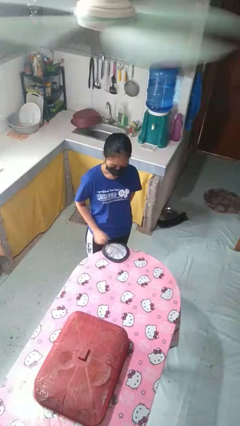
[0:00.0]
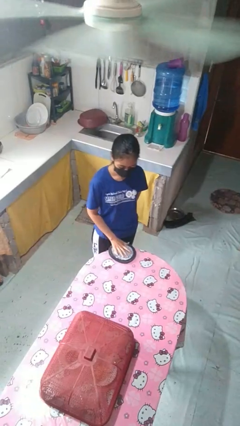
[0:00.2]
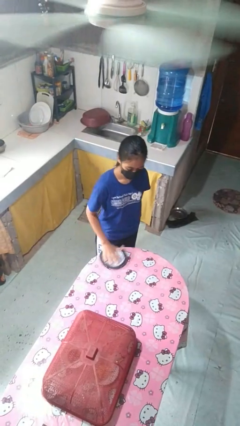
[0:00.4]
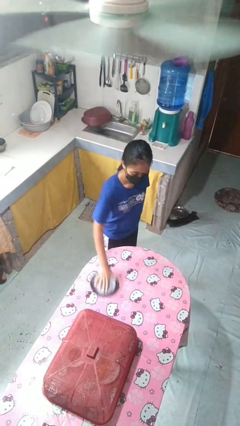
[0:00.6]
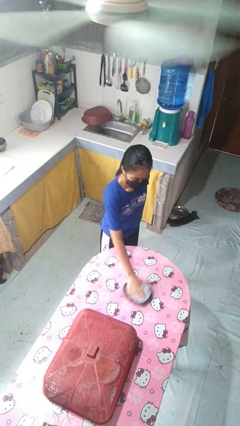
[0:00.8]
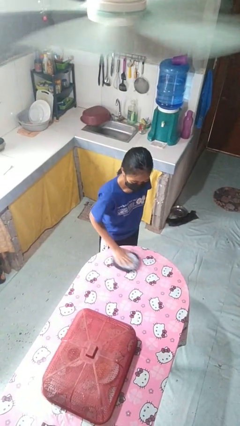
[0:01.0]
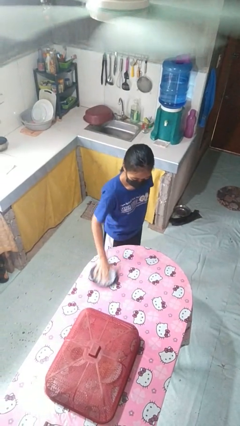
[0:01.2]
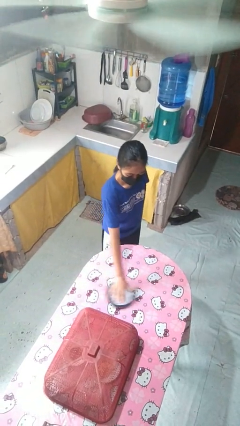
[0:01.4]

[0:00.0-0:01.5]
person cleans table with rag

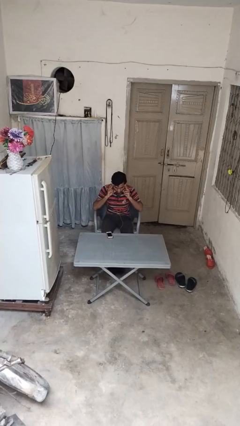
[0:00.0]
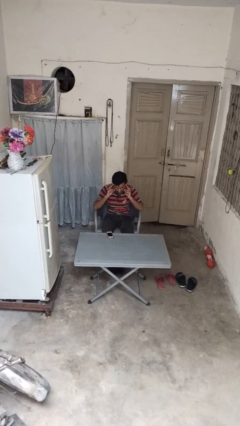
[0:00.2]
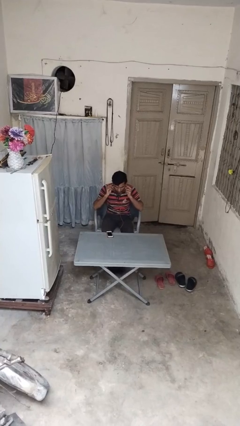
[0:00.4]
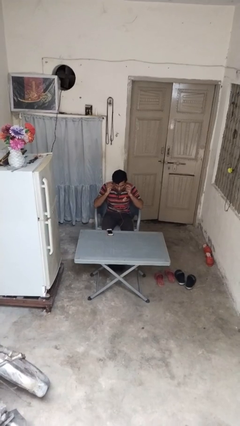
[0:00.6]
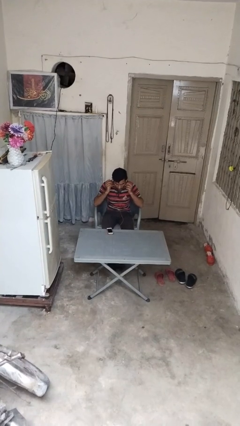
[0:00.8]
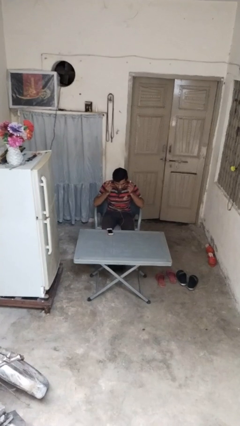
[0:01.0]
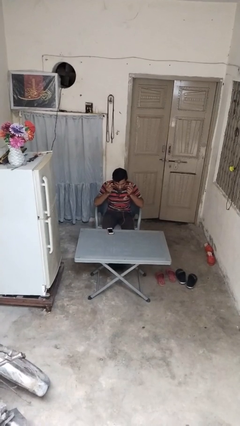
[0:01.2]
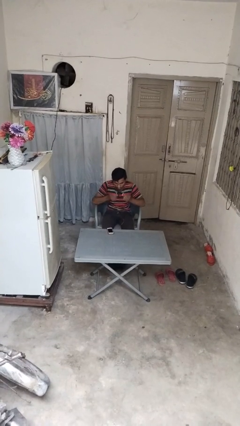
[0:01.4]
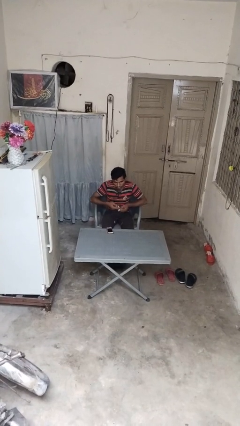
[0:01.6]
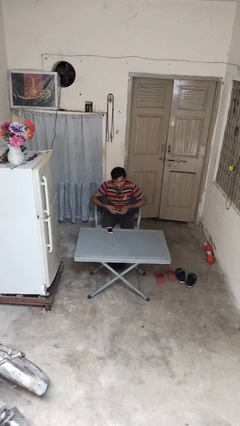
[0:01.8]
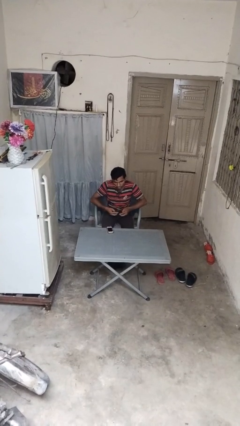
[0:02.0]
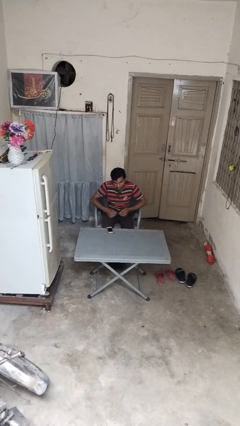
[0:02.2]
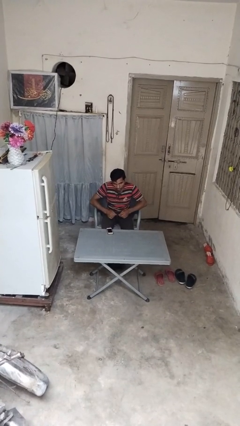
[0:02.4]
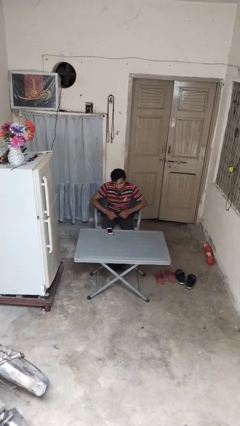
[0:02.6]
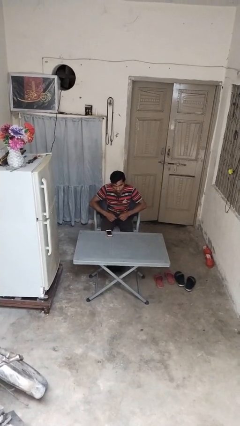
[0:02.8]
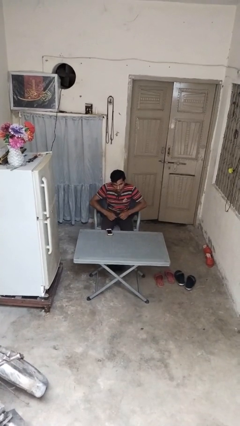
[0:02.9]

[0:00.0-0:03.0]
person takes off headphones

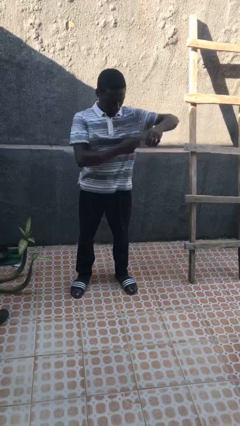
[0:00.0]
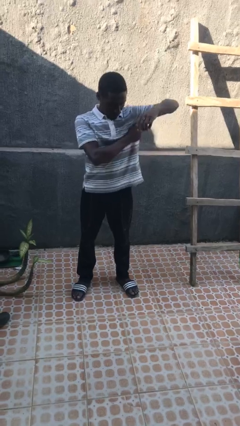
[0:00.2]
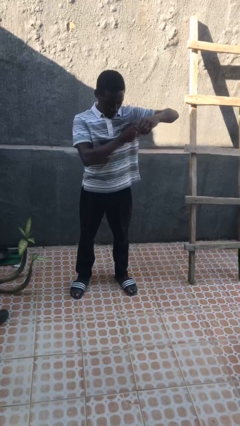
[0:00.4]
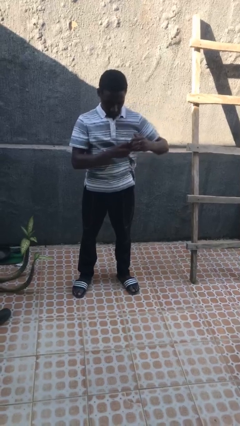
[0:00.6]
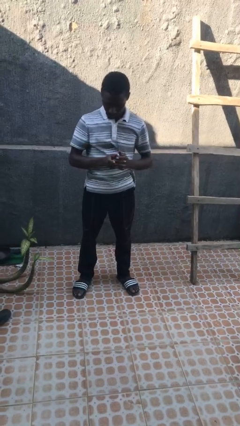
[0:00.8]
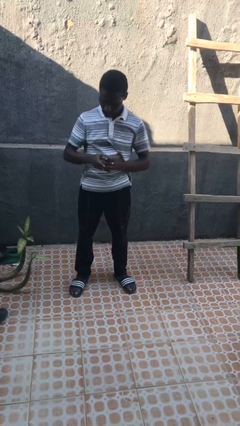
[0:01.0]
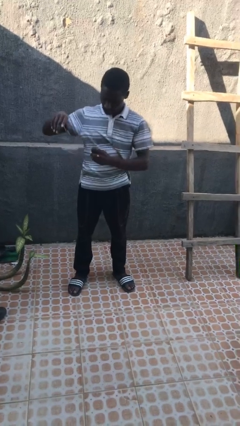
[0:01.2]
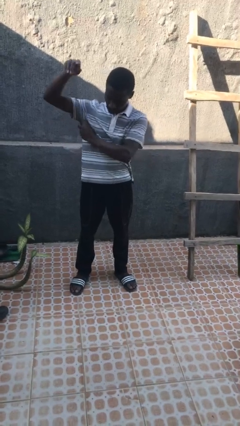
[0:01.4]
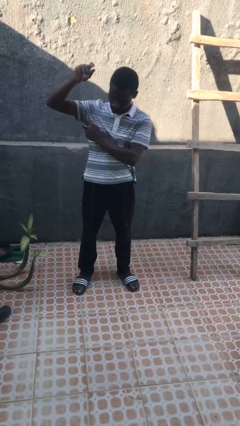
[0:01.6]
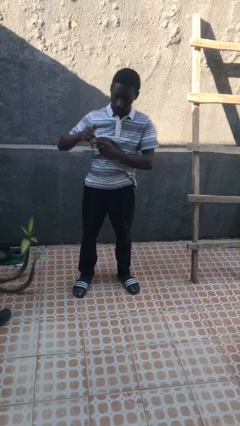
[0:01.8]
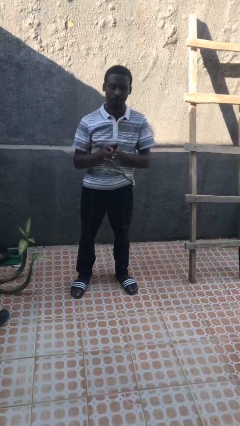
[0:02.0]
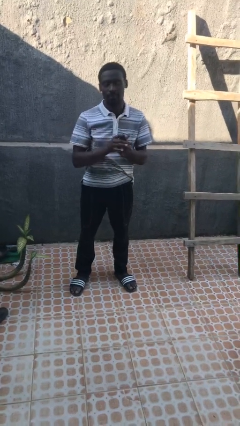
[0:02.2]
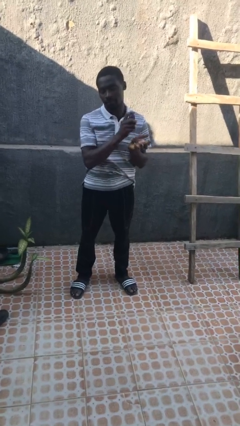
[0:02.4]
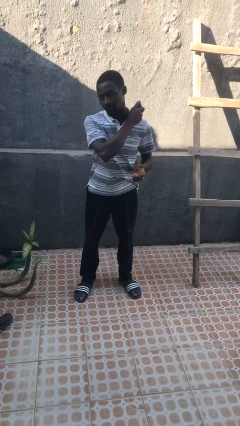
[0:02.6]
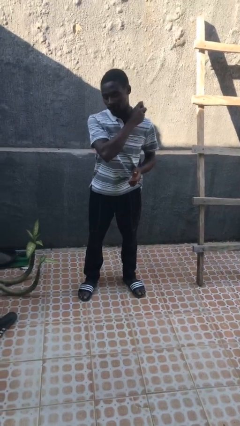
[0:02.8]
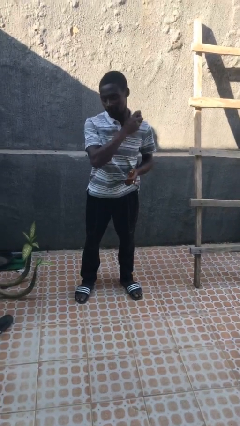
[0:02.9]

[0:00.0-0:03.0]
person applies deodorant

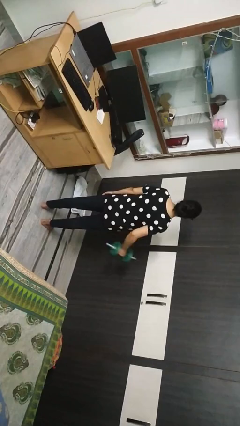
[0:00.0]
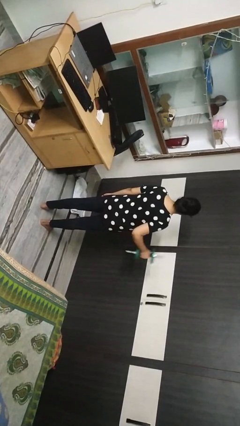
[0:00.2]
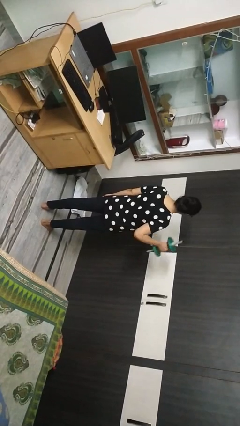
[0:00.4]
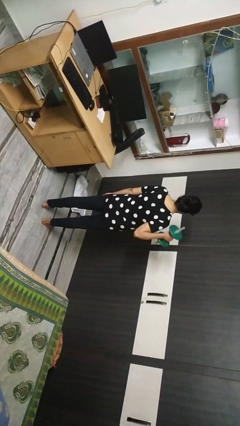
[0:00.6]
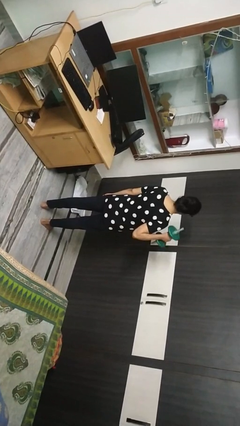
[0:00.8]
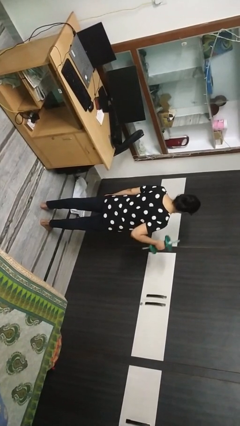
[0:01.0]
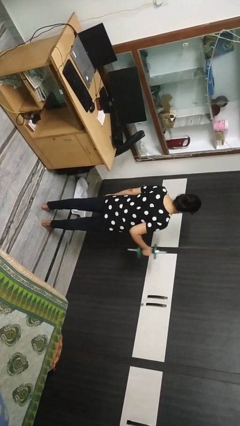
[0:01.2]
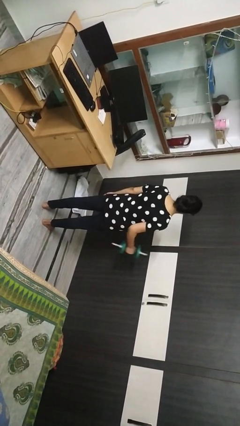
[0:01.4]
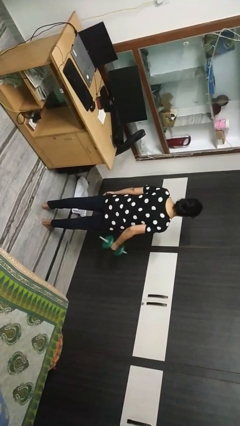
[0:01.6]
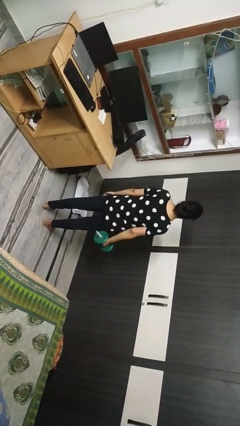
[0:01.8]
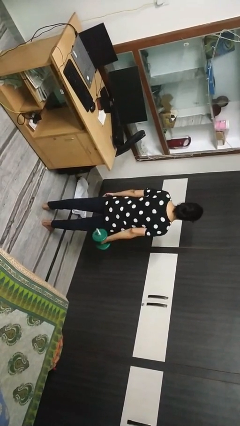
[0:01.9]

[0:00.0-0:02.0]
person lifts dumbbells

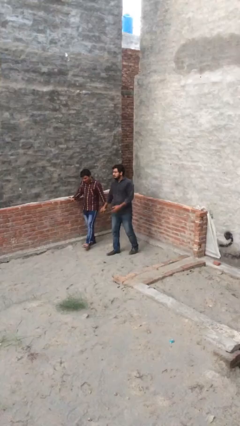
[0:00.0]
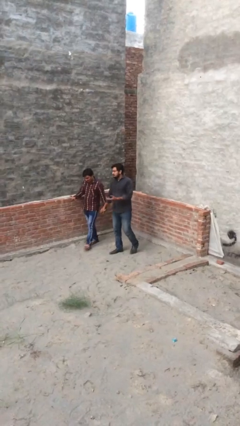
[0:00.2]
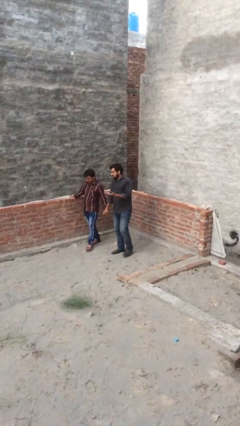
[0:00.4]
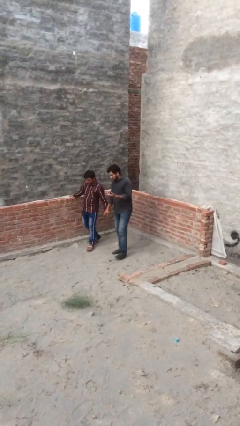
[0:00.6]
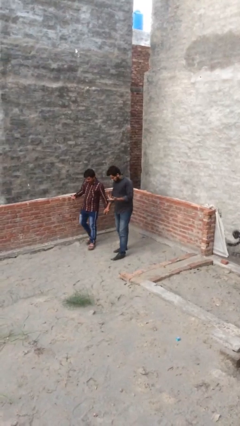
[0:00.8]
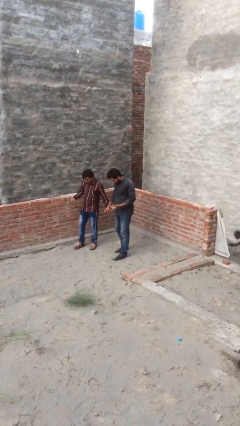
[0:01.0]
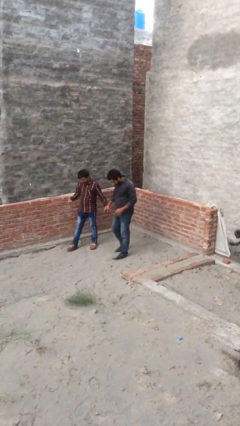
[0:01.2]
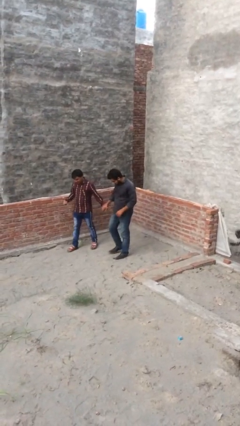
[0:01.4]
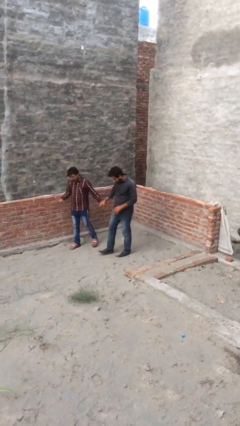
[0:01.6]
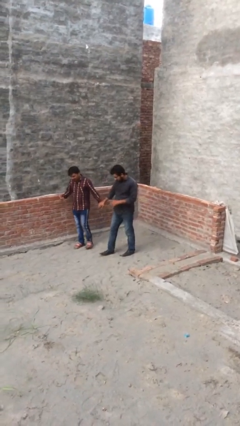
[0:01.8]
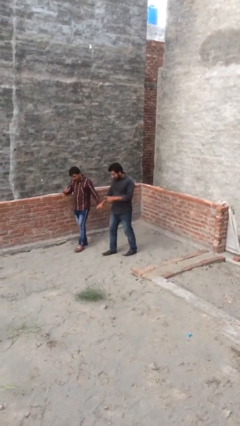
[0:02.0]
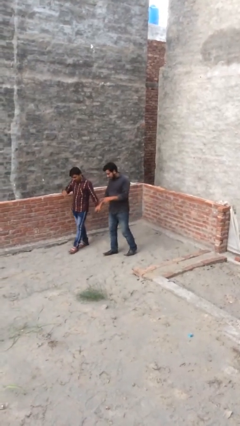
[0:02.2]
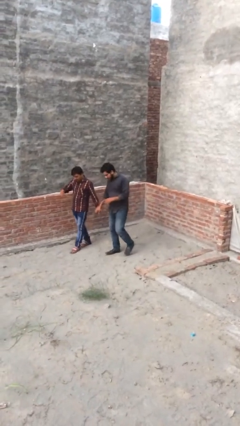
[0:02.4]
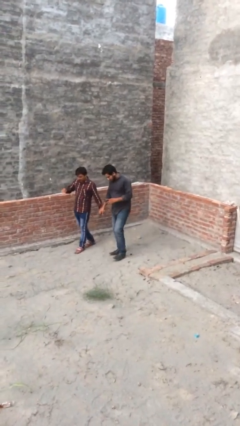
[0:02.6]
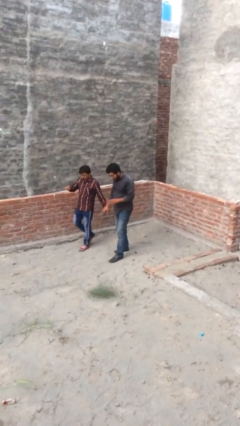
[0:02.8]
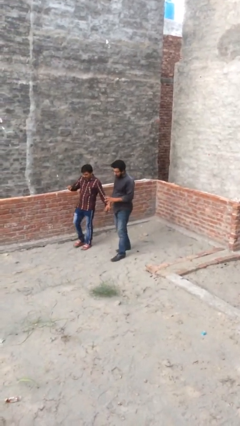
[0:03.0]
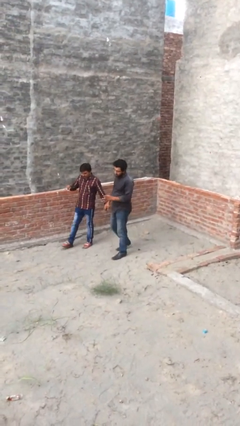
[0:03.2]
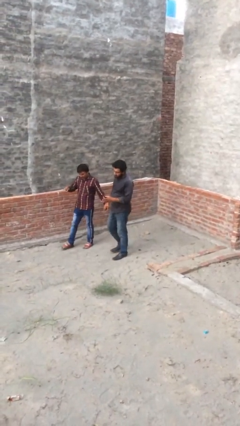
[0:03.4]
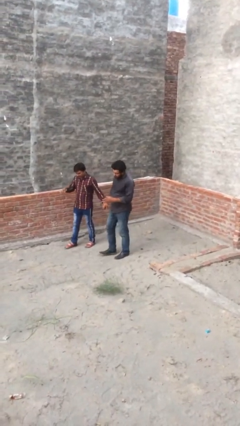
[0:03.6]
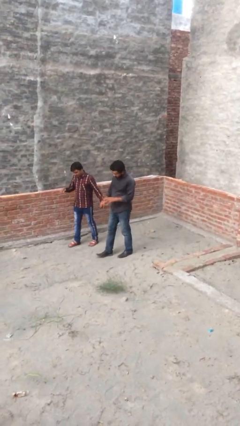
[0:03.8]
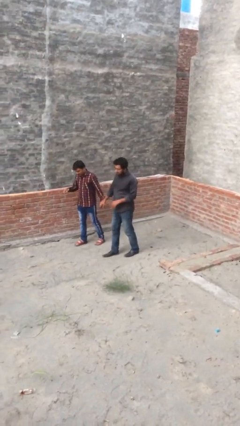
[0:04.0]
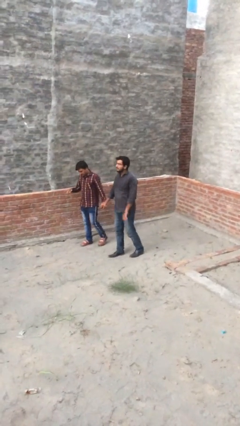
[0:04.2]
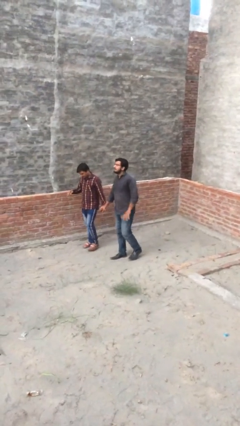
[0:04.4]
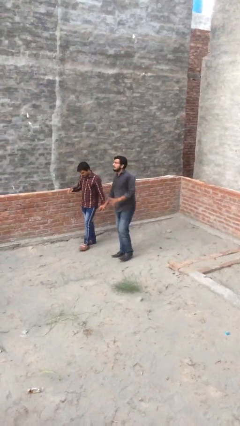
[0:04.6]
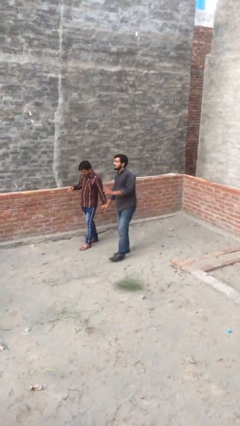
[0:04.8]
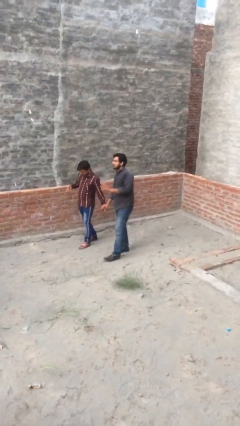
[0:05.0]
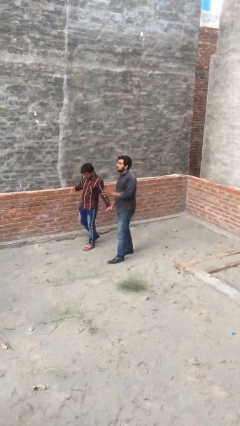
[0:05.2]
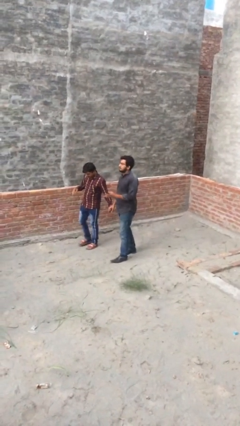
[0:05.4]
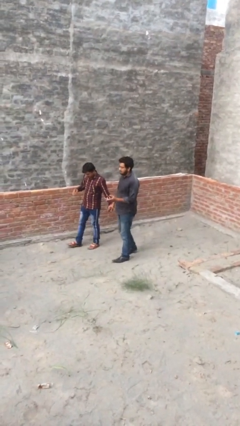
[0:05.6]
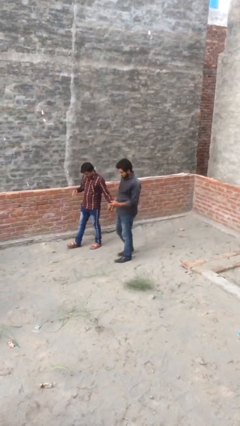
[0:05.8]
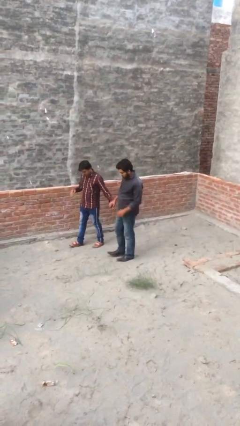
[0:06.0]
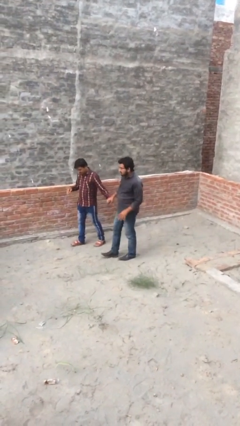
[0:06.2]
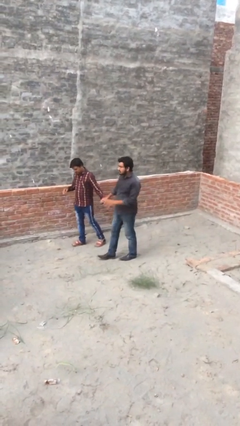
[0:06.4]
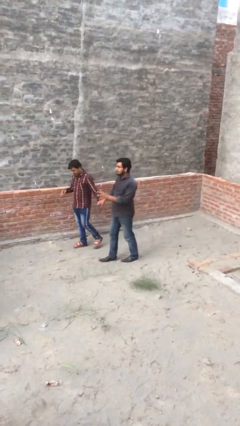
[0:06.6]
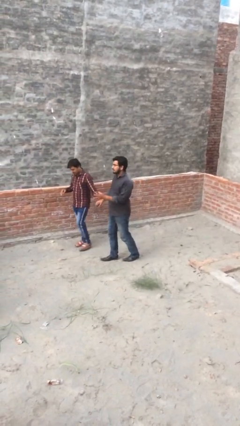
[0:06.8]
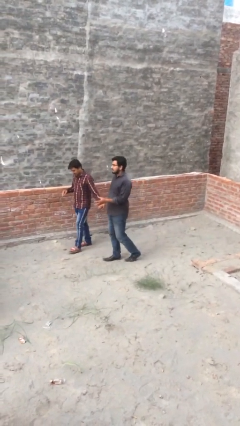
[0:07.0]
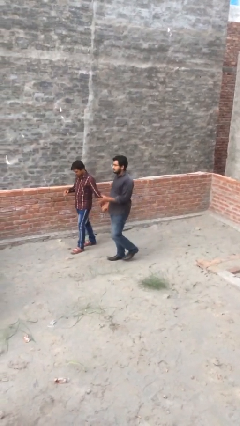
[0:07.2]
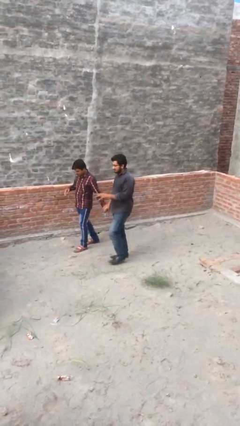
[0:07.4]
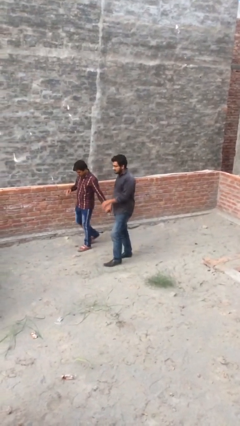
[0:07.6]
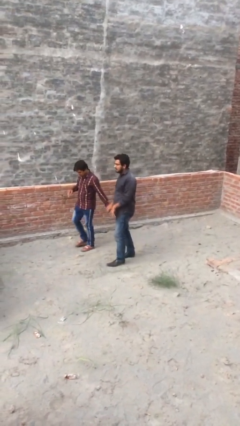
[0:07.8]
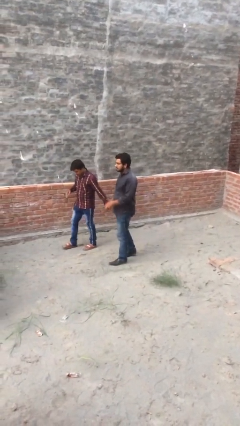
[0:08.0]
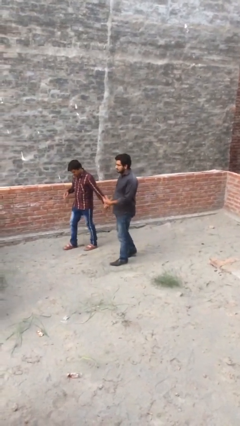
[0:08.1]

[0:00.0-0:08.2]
person holds hand
